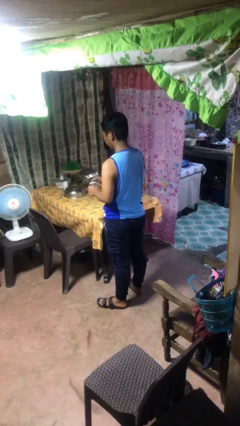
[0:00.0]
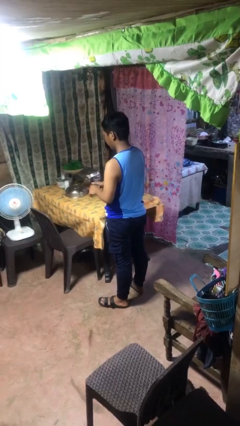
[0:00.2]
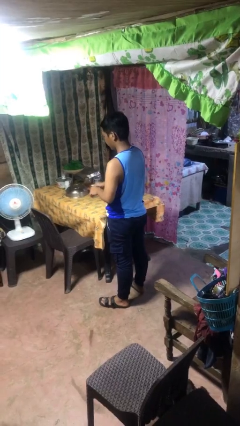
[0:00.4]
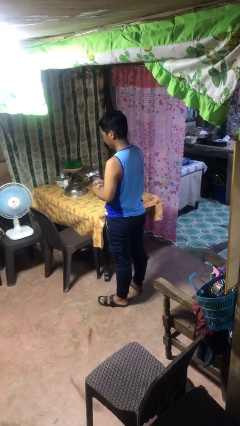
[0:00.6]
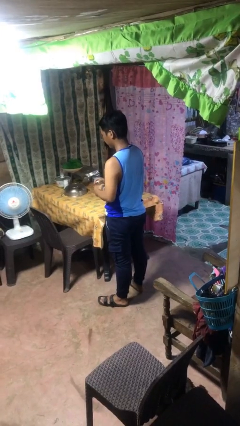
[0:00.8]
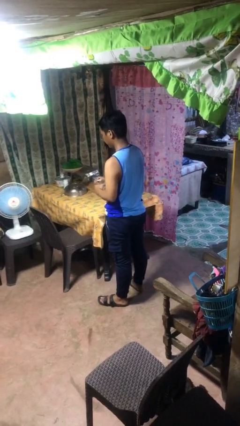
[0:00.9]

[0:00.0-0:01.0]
person opens jar

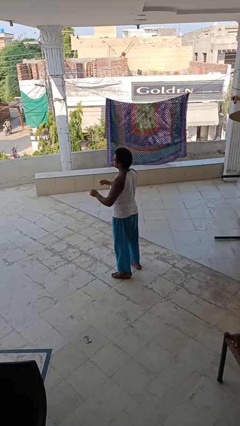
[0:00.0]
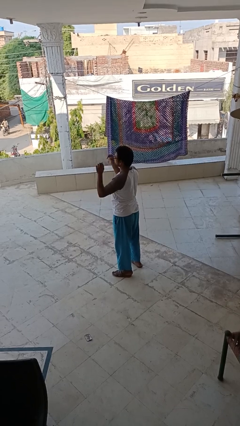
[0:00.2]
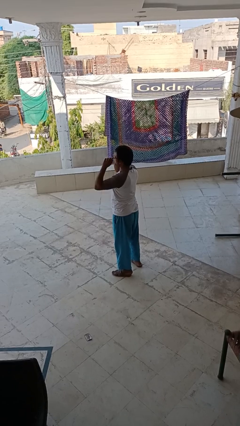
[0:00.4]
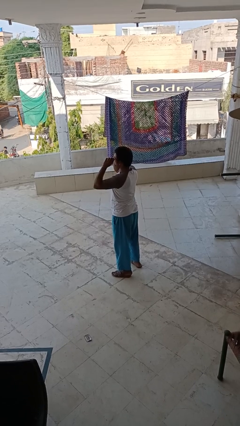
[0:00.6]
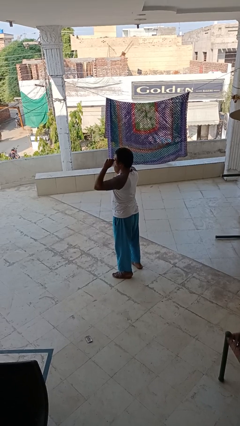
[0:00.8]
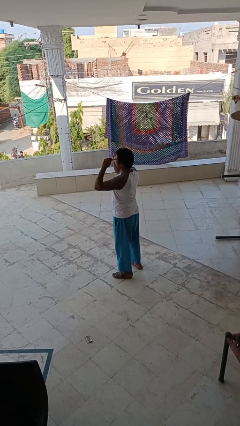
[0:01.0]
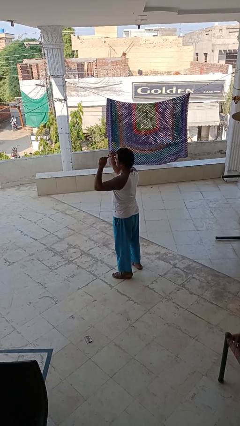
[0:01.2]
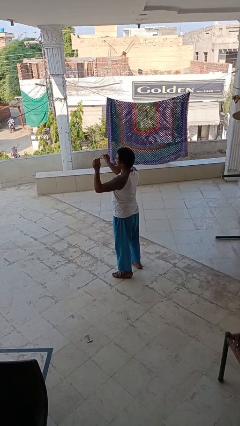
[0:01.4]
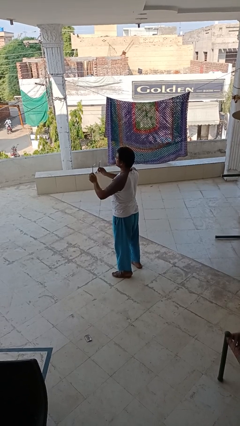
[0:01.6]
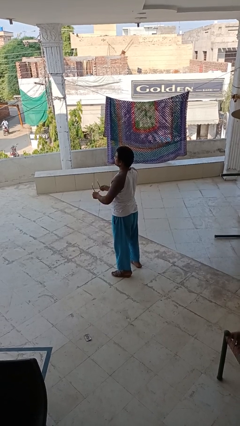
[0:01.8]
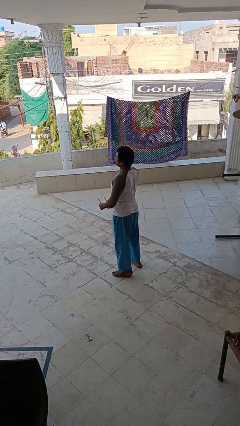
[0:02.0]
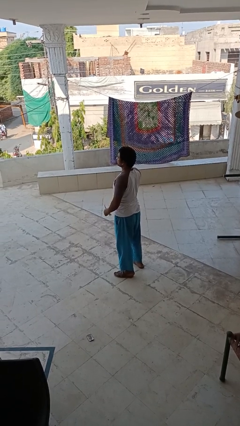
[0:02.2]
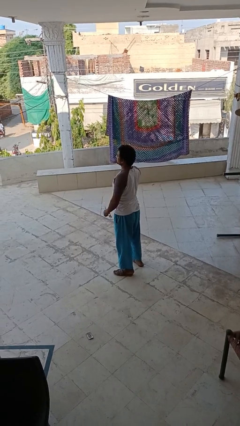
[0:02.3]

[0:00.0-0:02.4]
person takes off glasses

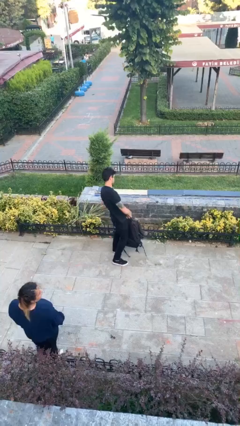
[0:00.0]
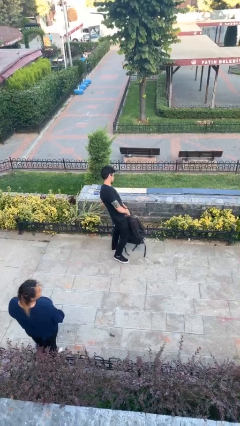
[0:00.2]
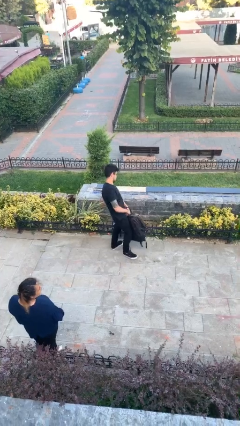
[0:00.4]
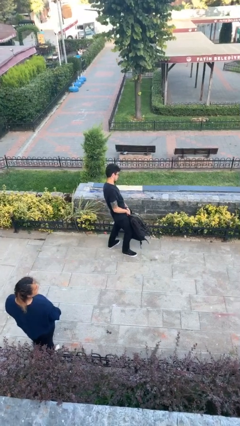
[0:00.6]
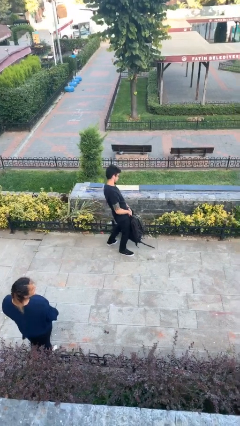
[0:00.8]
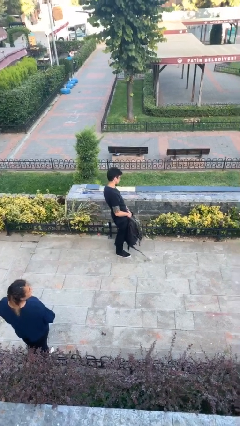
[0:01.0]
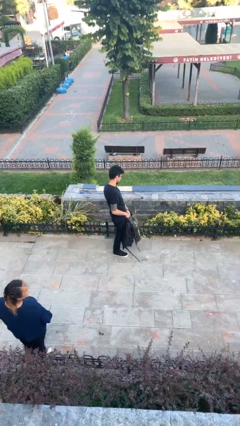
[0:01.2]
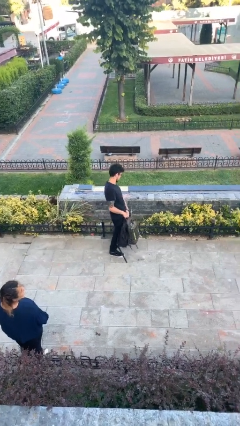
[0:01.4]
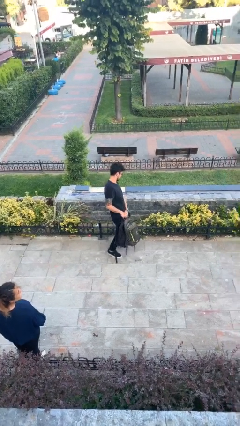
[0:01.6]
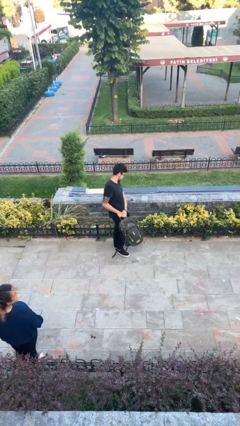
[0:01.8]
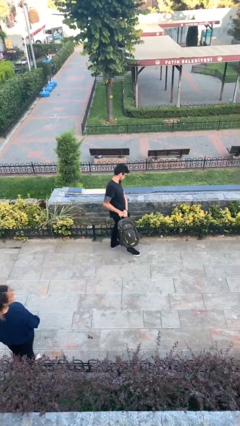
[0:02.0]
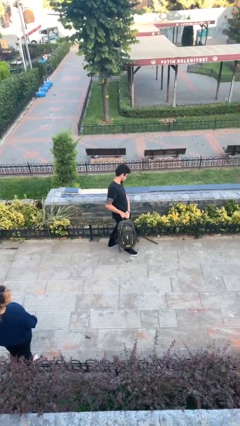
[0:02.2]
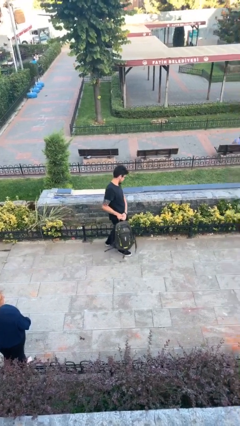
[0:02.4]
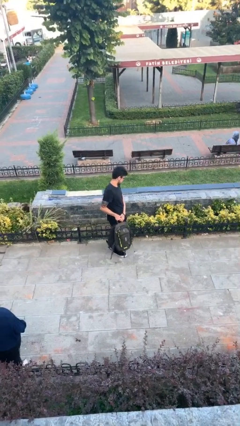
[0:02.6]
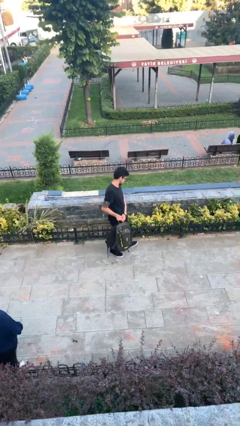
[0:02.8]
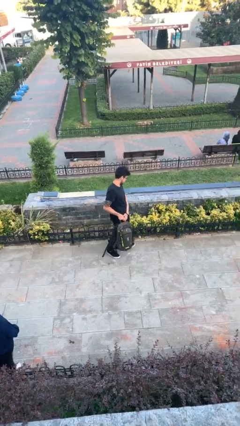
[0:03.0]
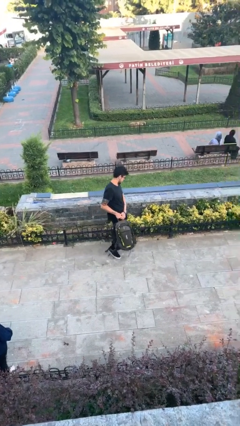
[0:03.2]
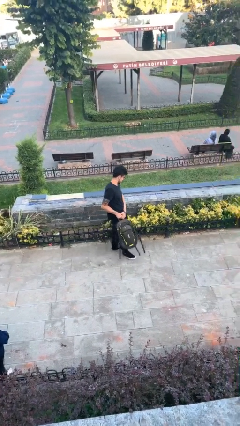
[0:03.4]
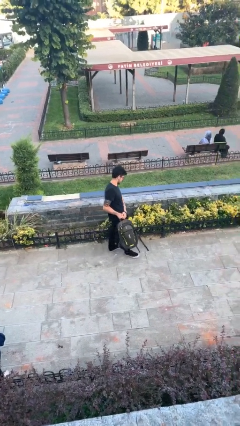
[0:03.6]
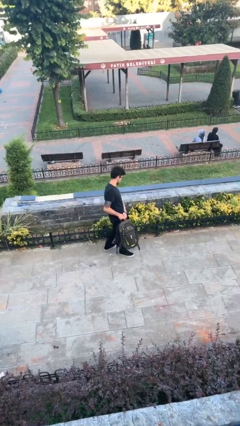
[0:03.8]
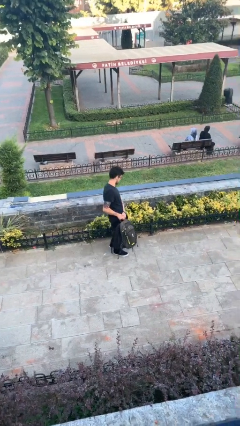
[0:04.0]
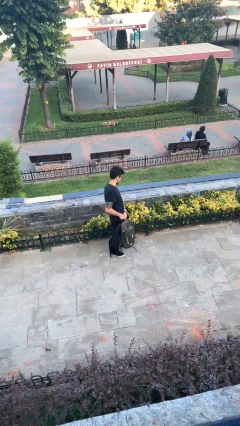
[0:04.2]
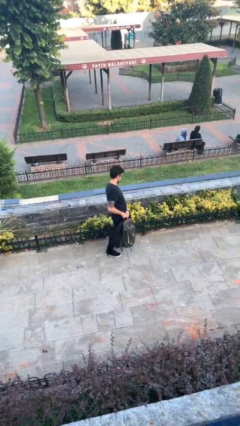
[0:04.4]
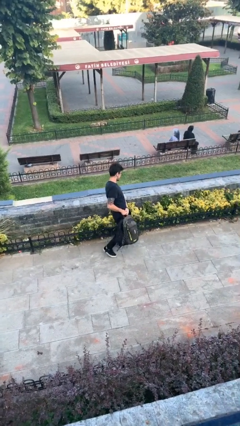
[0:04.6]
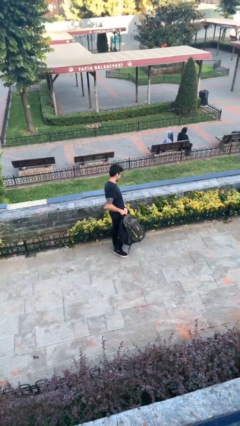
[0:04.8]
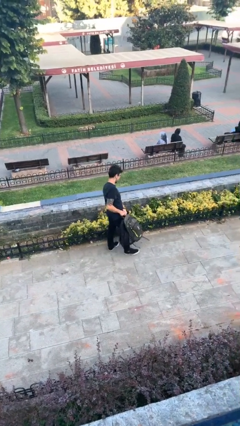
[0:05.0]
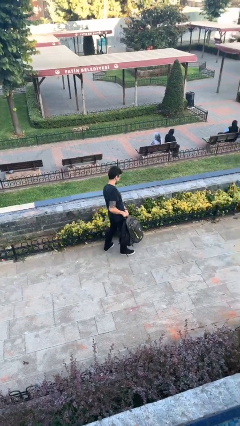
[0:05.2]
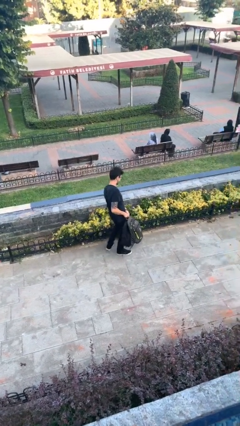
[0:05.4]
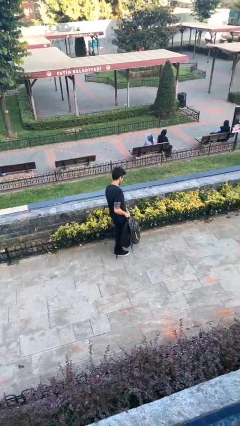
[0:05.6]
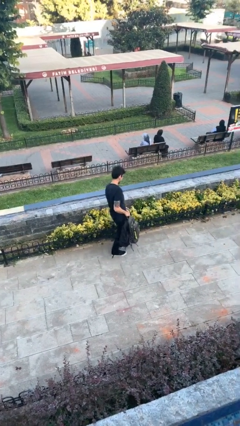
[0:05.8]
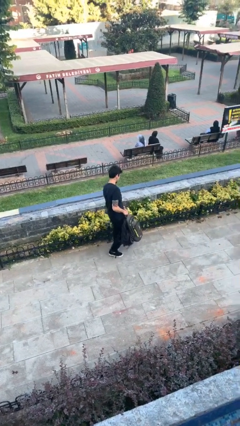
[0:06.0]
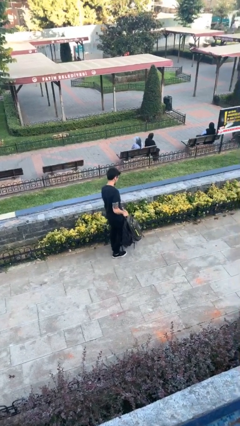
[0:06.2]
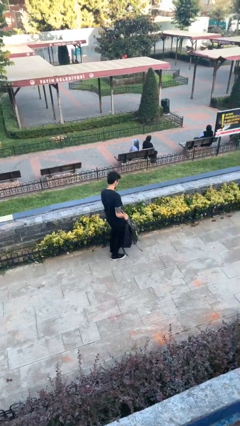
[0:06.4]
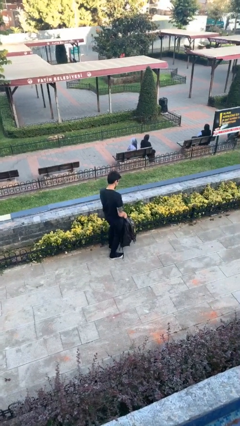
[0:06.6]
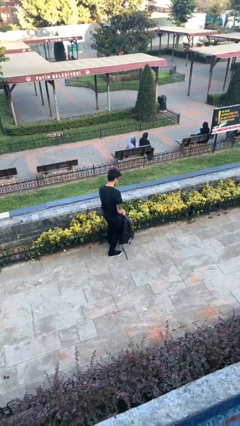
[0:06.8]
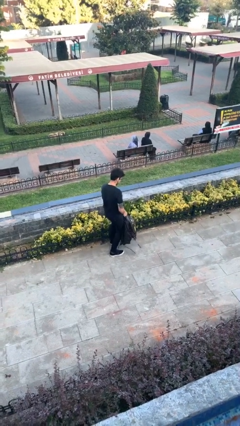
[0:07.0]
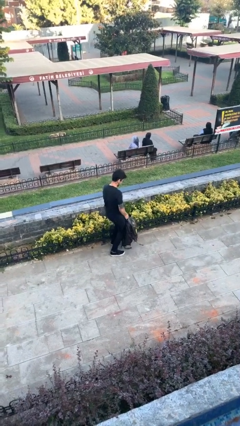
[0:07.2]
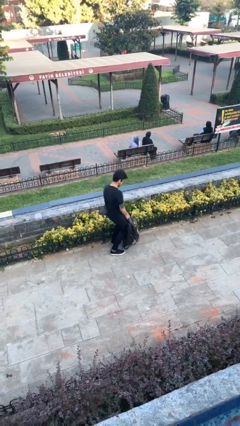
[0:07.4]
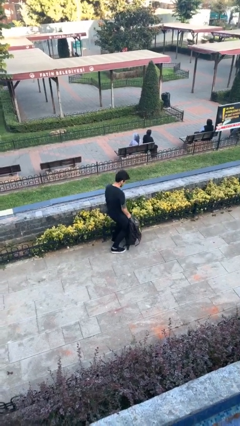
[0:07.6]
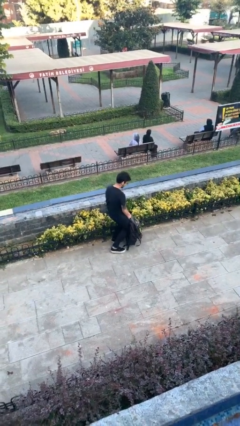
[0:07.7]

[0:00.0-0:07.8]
person carries heavy object

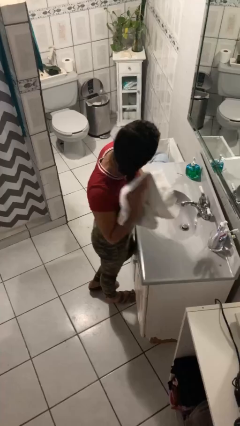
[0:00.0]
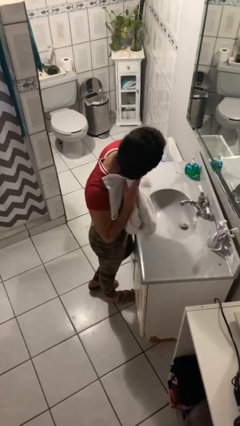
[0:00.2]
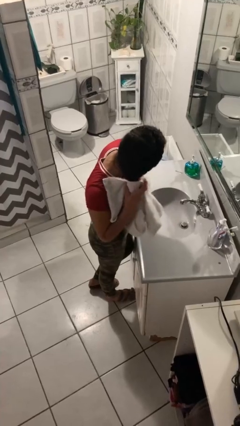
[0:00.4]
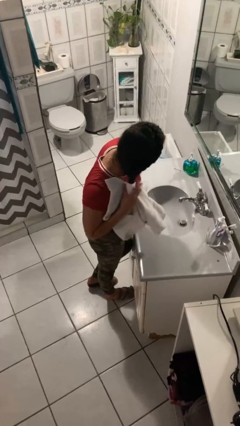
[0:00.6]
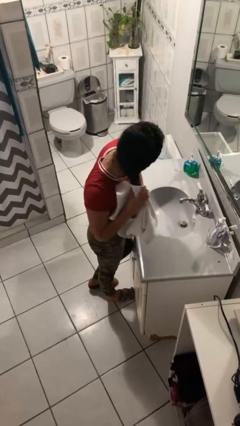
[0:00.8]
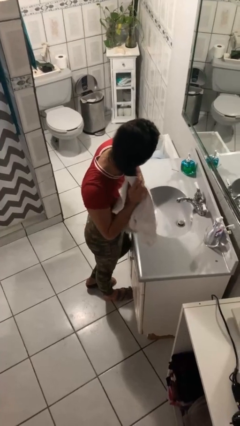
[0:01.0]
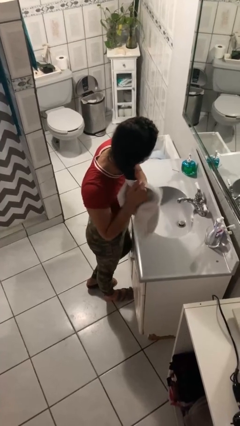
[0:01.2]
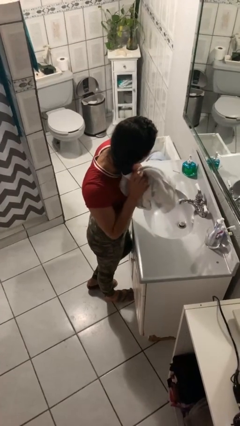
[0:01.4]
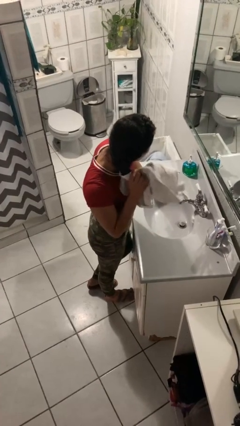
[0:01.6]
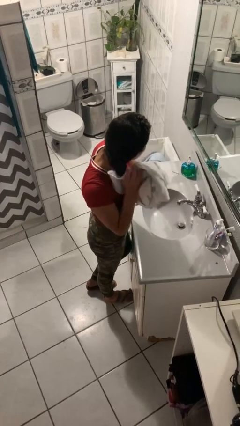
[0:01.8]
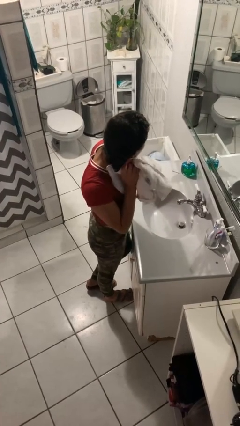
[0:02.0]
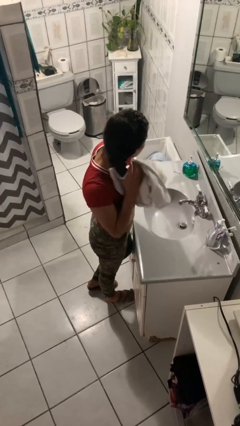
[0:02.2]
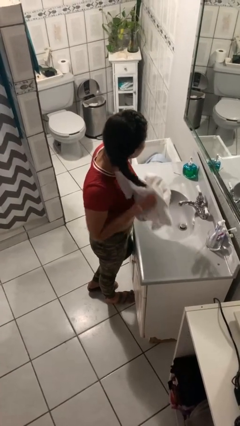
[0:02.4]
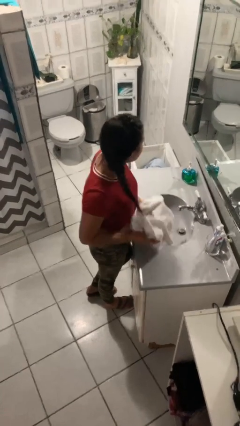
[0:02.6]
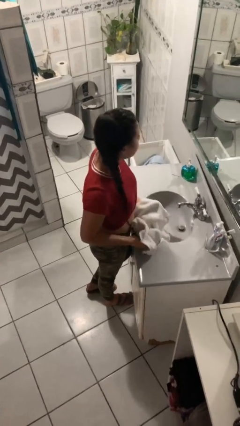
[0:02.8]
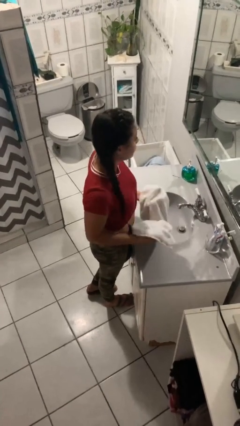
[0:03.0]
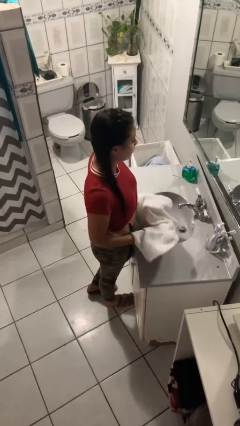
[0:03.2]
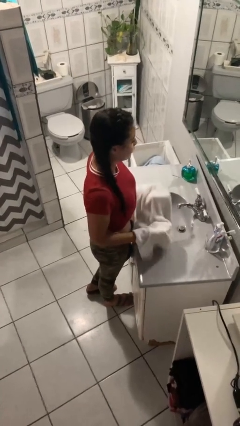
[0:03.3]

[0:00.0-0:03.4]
person dries hair with towel

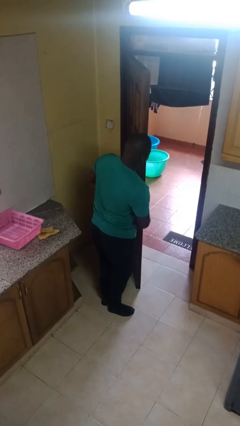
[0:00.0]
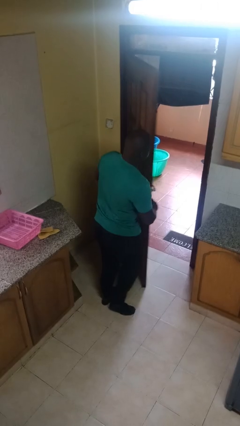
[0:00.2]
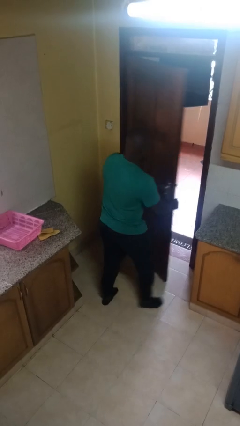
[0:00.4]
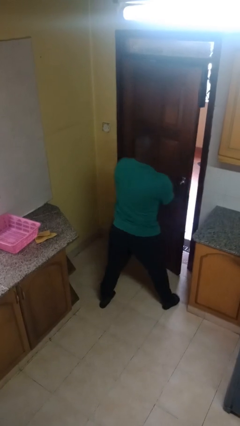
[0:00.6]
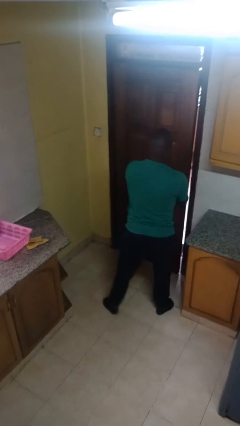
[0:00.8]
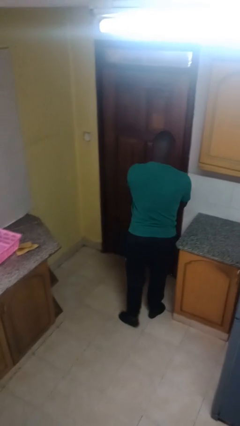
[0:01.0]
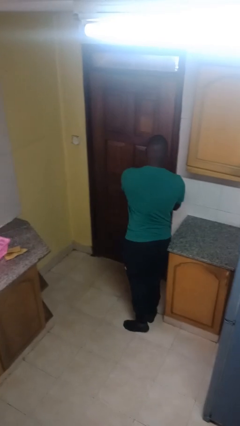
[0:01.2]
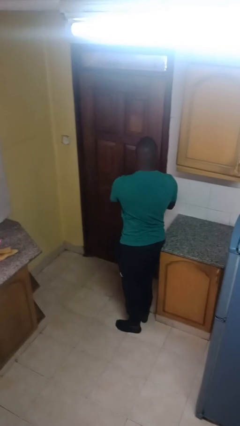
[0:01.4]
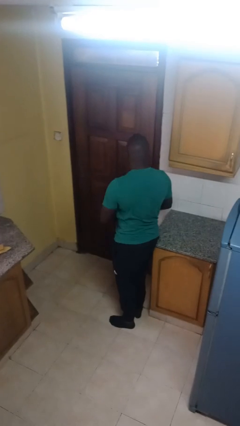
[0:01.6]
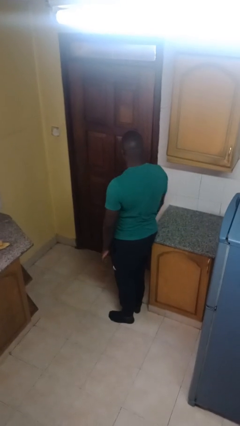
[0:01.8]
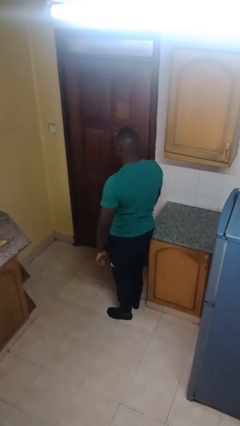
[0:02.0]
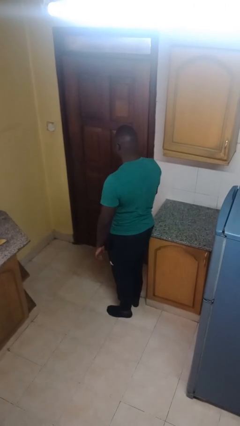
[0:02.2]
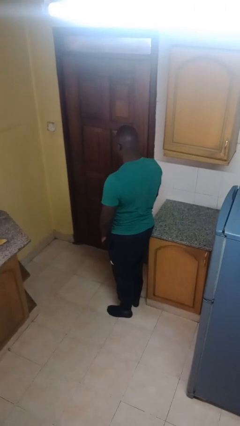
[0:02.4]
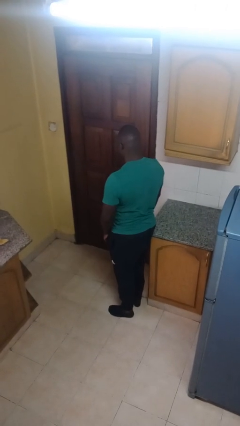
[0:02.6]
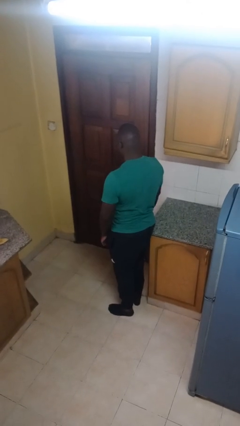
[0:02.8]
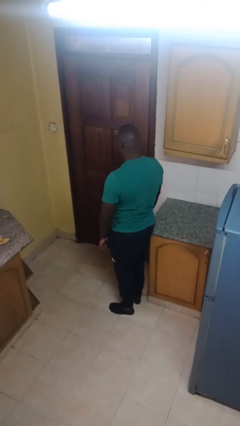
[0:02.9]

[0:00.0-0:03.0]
person closes facility door
